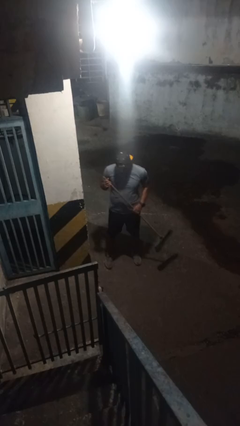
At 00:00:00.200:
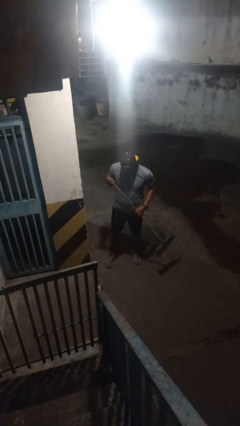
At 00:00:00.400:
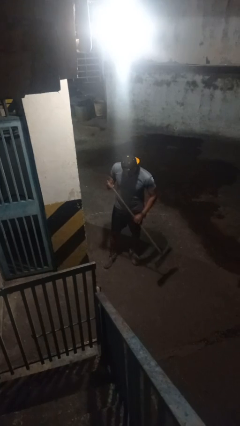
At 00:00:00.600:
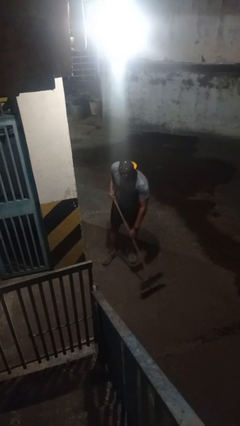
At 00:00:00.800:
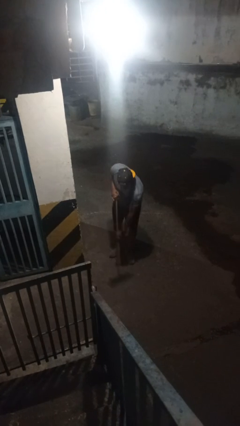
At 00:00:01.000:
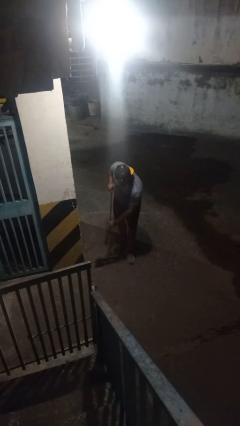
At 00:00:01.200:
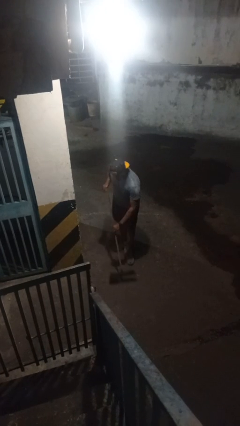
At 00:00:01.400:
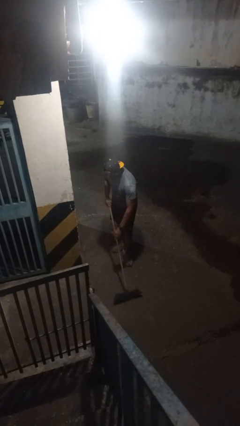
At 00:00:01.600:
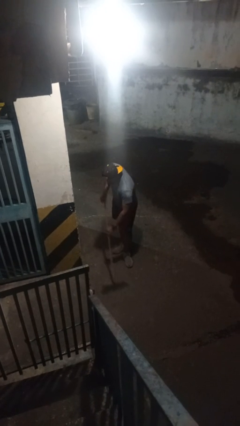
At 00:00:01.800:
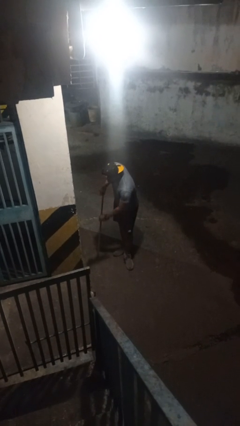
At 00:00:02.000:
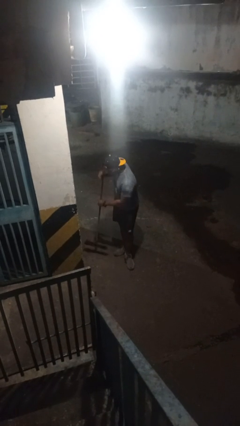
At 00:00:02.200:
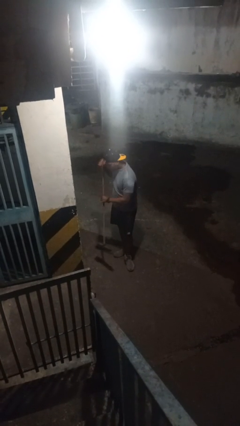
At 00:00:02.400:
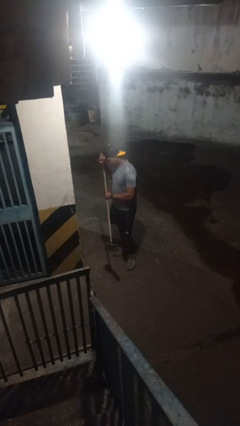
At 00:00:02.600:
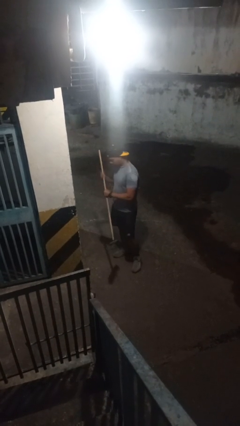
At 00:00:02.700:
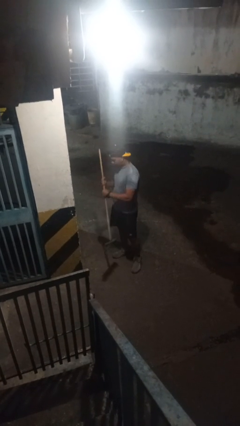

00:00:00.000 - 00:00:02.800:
person sweeps floor

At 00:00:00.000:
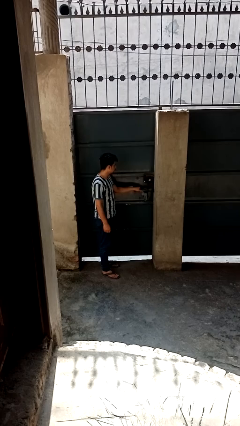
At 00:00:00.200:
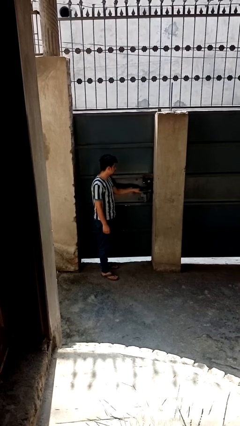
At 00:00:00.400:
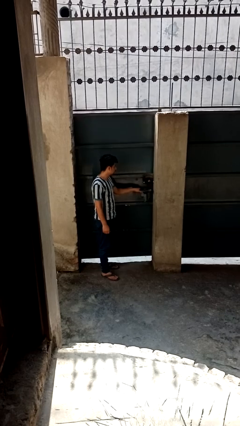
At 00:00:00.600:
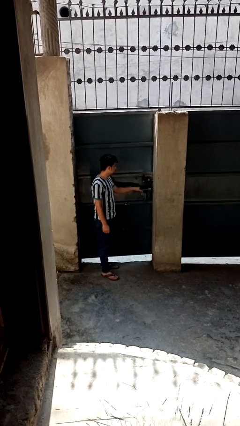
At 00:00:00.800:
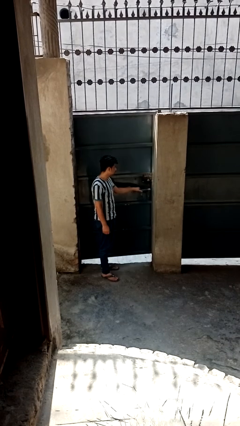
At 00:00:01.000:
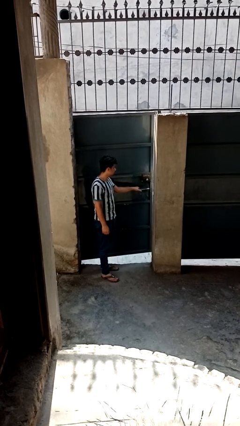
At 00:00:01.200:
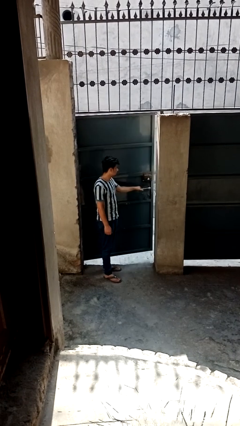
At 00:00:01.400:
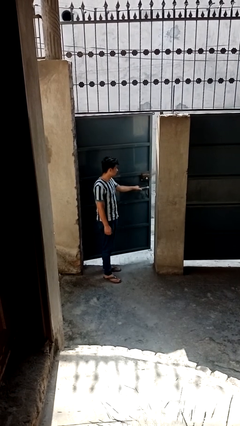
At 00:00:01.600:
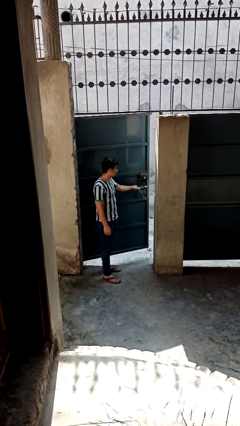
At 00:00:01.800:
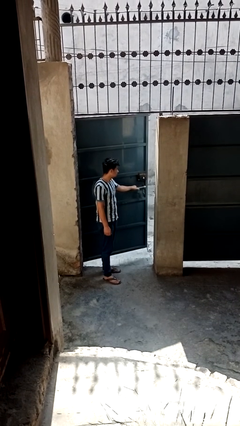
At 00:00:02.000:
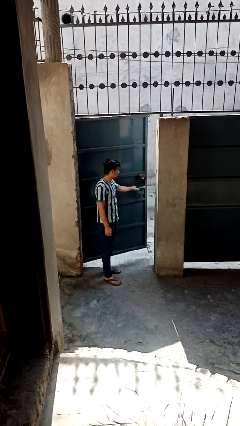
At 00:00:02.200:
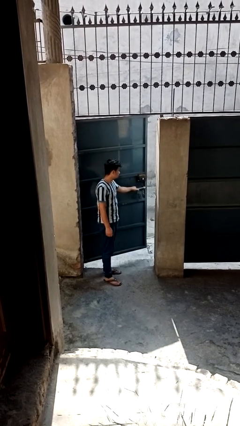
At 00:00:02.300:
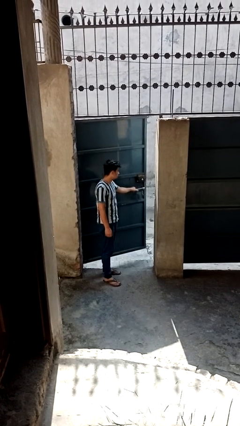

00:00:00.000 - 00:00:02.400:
person opens gate

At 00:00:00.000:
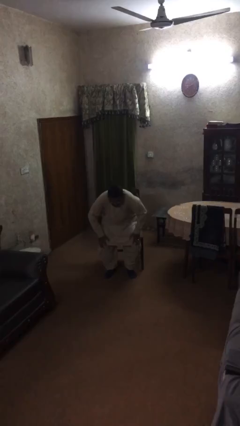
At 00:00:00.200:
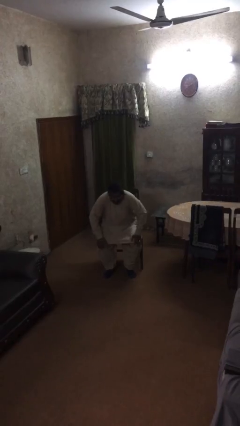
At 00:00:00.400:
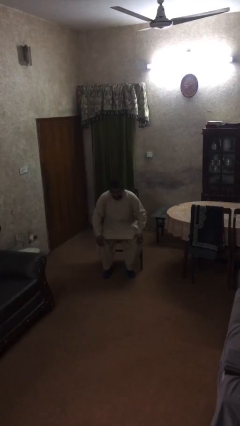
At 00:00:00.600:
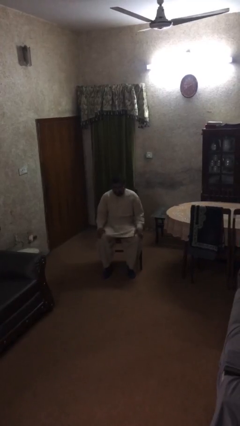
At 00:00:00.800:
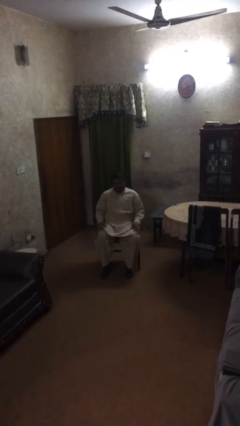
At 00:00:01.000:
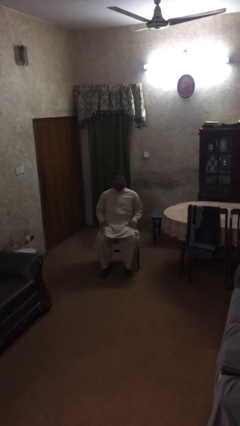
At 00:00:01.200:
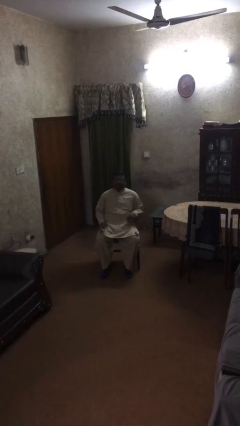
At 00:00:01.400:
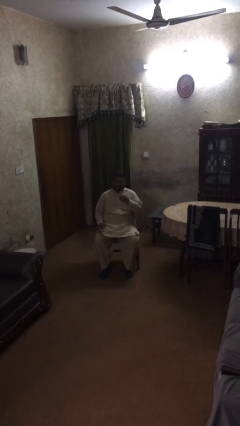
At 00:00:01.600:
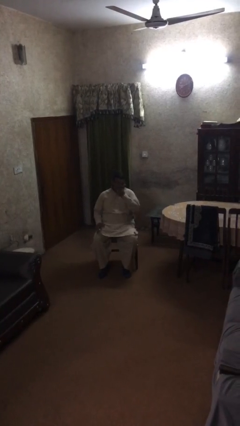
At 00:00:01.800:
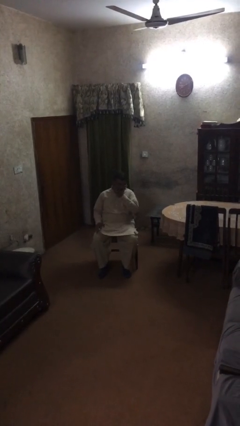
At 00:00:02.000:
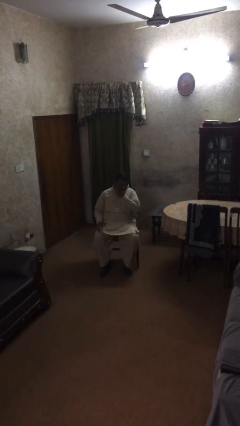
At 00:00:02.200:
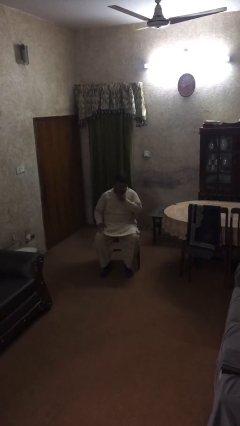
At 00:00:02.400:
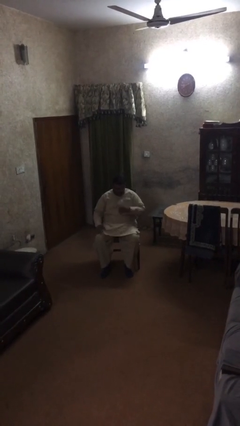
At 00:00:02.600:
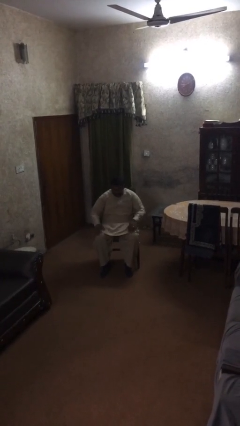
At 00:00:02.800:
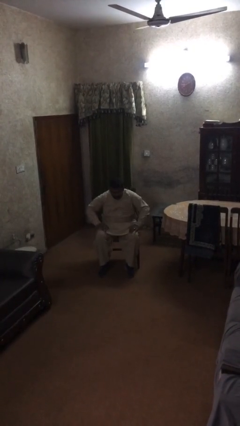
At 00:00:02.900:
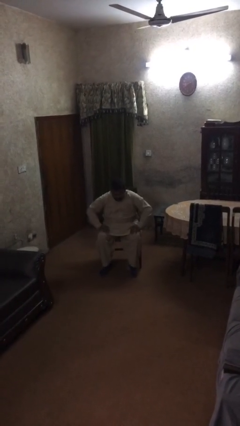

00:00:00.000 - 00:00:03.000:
person sits down

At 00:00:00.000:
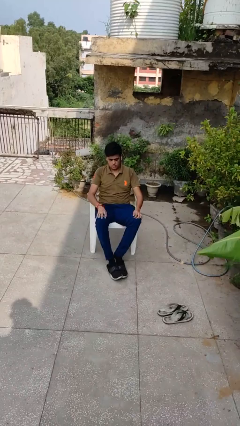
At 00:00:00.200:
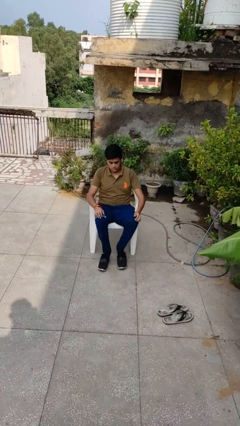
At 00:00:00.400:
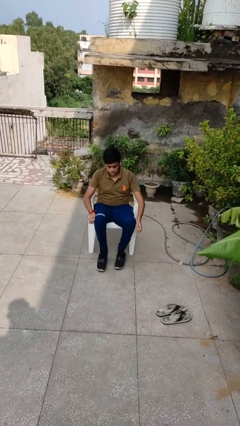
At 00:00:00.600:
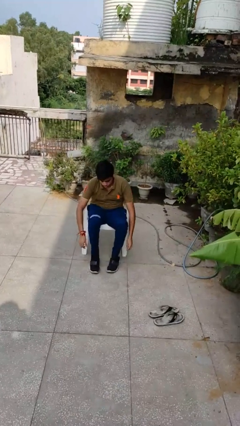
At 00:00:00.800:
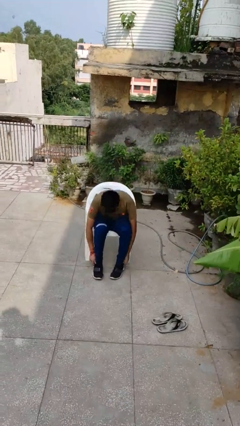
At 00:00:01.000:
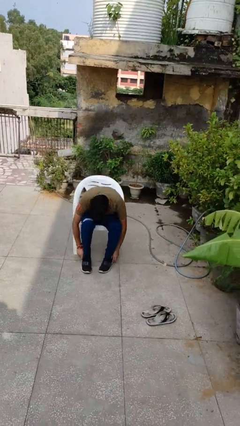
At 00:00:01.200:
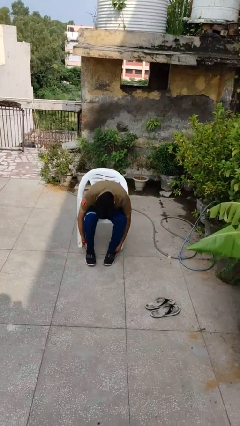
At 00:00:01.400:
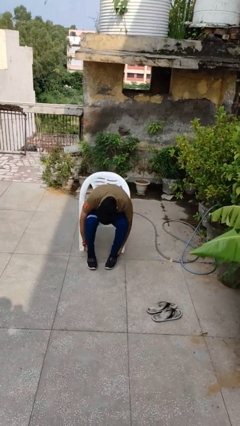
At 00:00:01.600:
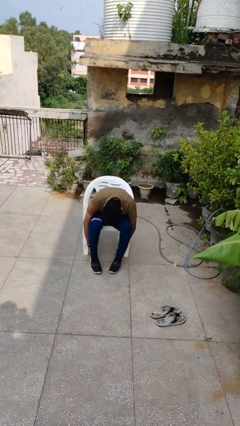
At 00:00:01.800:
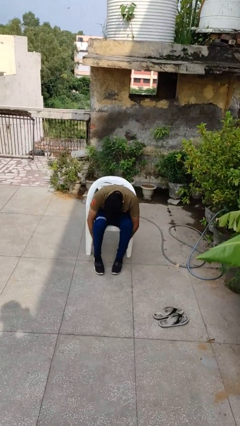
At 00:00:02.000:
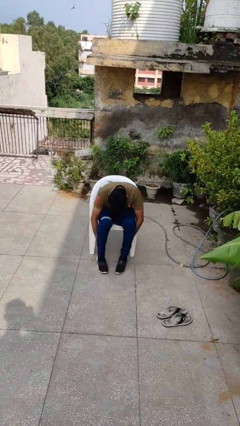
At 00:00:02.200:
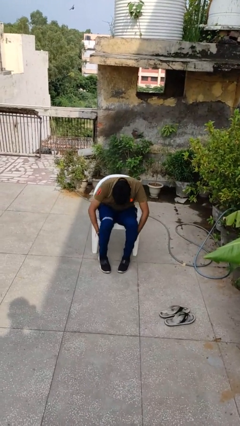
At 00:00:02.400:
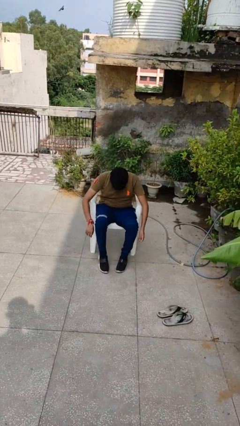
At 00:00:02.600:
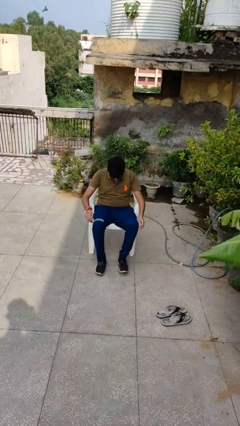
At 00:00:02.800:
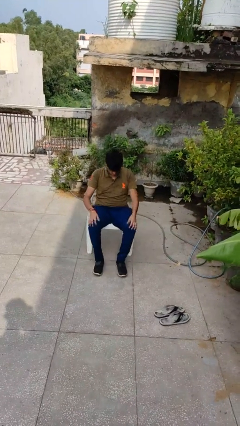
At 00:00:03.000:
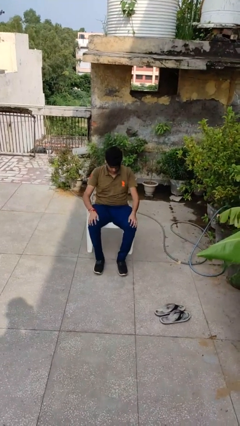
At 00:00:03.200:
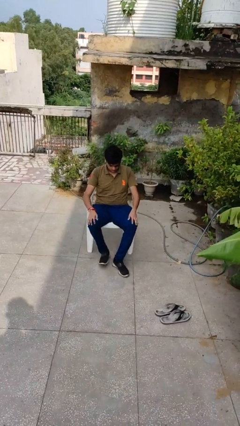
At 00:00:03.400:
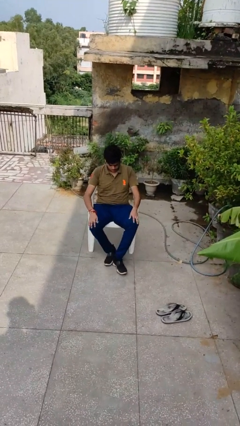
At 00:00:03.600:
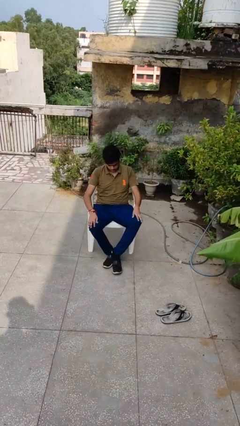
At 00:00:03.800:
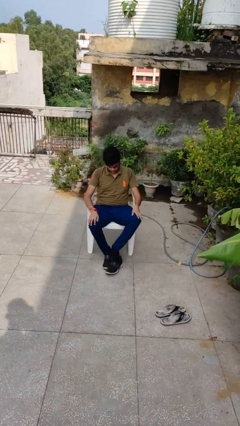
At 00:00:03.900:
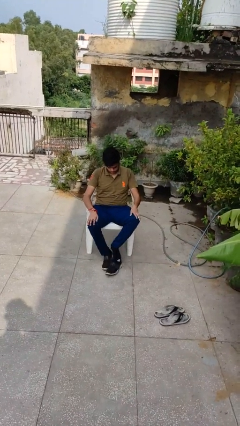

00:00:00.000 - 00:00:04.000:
person puts on shoes

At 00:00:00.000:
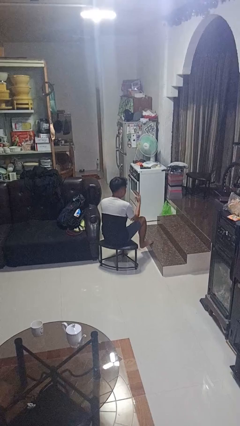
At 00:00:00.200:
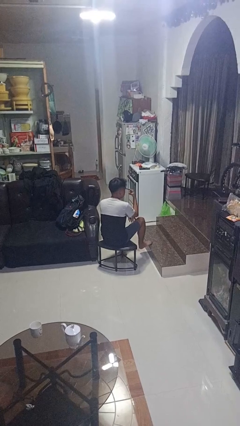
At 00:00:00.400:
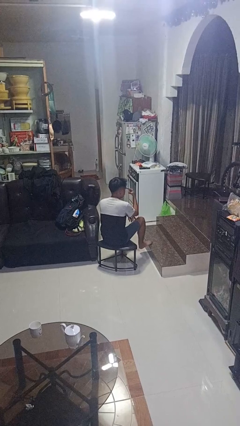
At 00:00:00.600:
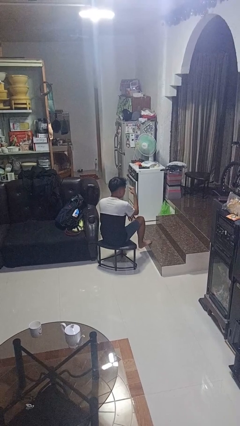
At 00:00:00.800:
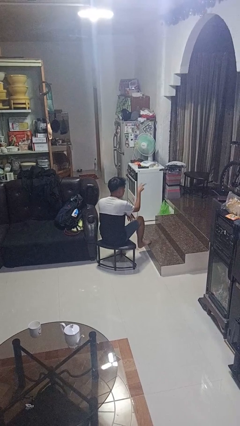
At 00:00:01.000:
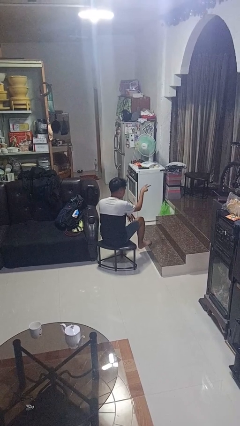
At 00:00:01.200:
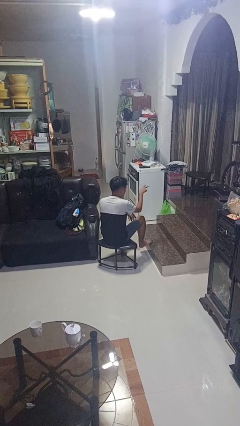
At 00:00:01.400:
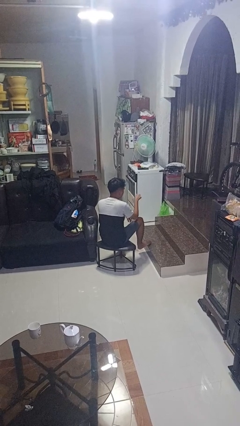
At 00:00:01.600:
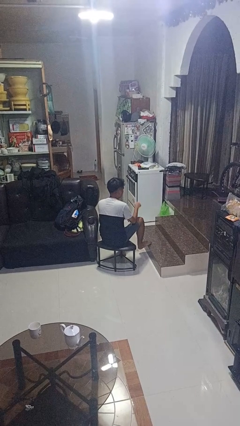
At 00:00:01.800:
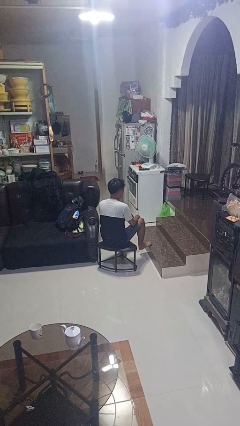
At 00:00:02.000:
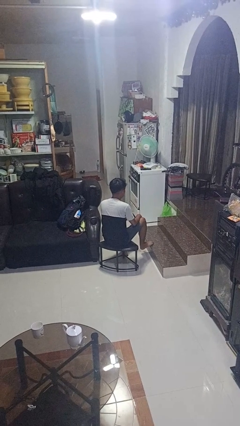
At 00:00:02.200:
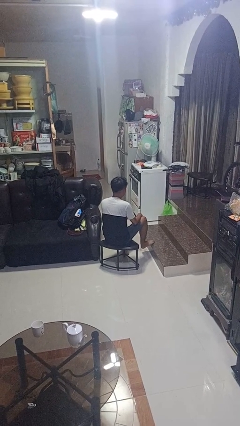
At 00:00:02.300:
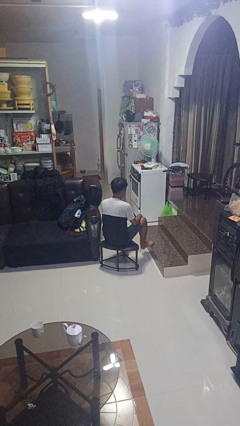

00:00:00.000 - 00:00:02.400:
person gestures watch closely

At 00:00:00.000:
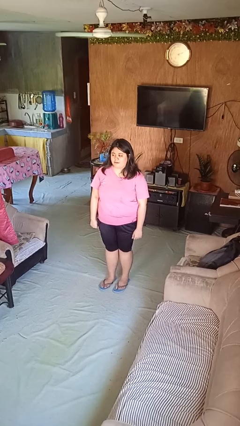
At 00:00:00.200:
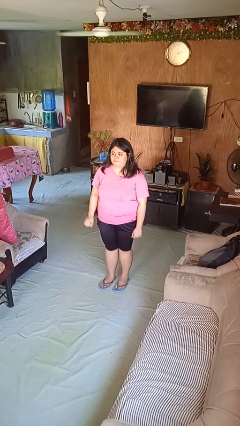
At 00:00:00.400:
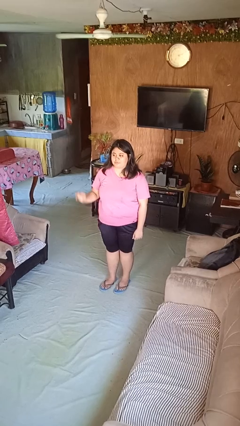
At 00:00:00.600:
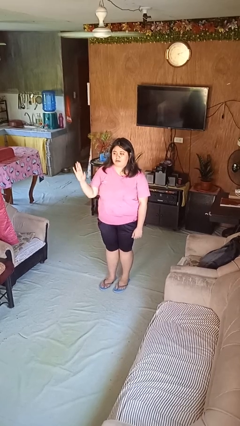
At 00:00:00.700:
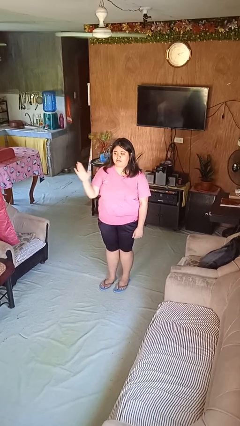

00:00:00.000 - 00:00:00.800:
person gestures swipe left

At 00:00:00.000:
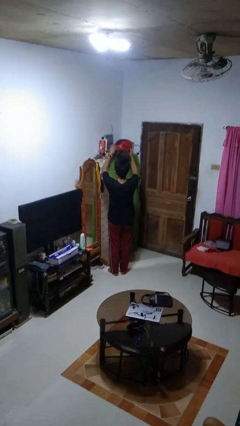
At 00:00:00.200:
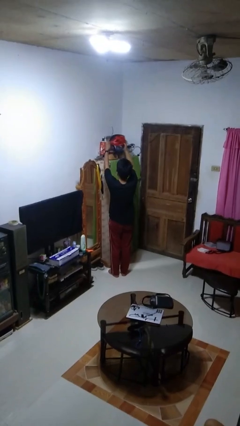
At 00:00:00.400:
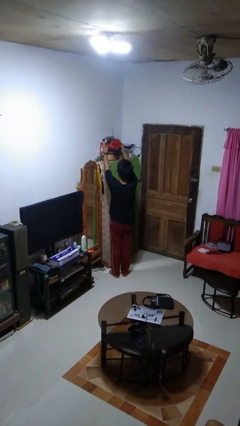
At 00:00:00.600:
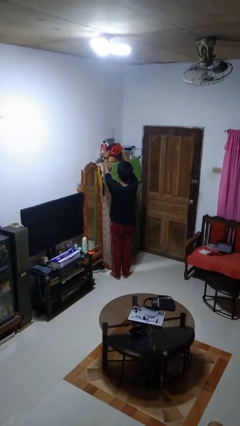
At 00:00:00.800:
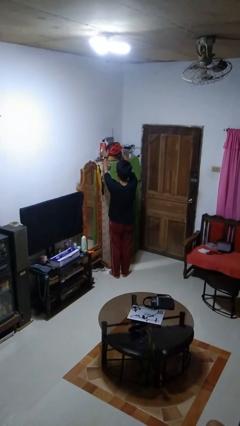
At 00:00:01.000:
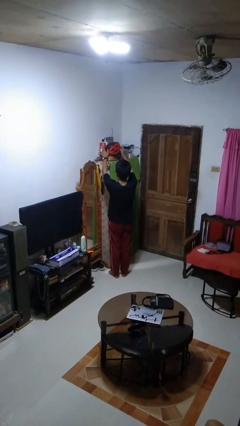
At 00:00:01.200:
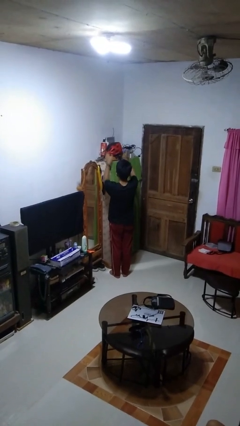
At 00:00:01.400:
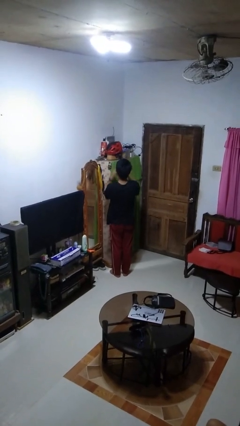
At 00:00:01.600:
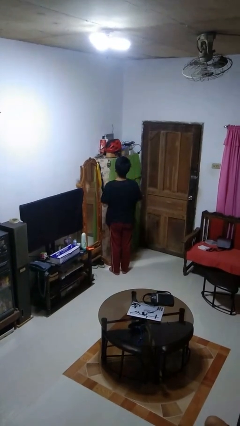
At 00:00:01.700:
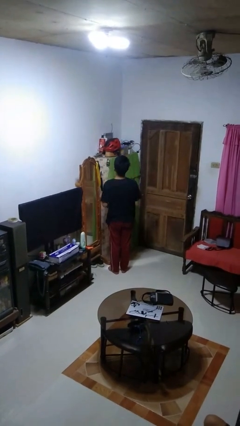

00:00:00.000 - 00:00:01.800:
person puts down object on shelf
